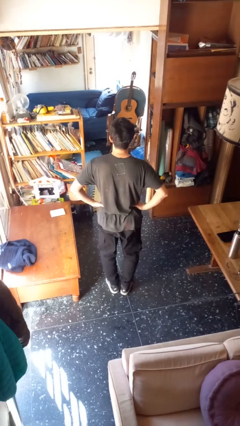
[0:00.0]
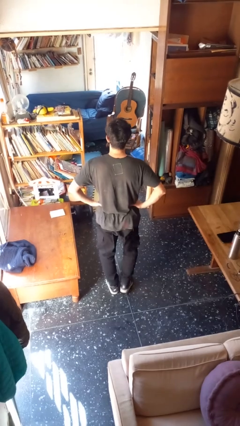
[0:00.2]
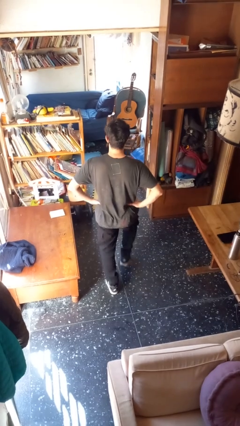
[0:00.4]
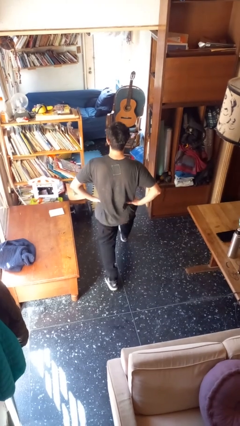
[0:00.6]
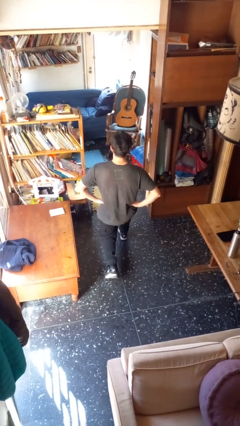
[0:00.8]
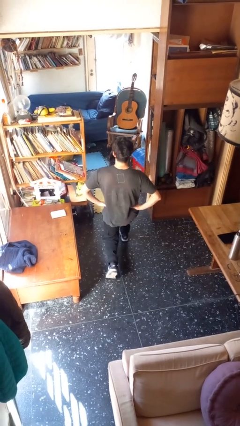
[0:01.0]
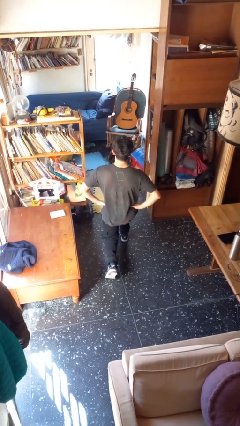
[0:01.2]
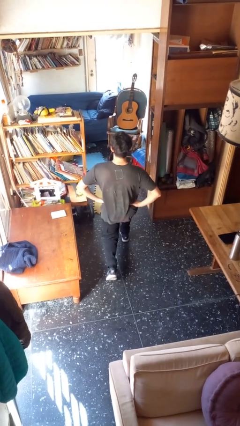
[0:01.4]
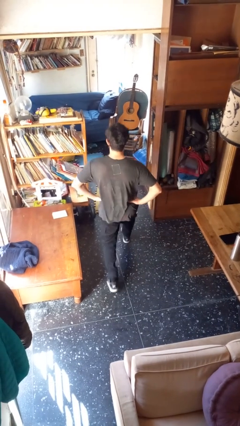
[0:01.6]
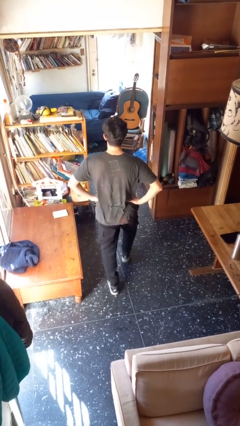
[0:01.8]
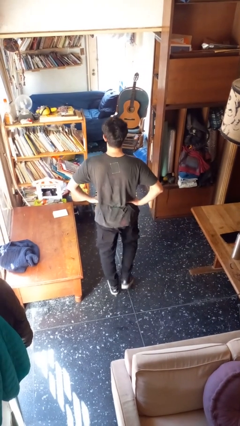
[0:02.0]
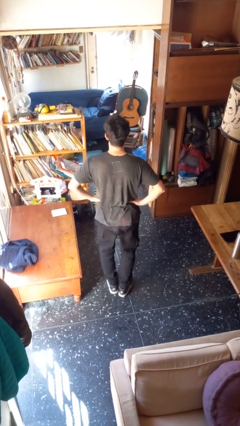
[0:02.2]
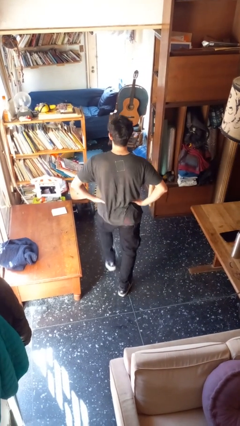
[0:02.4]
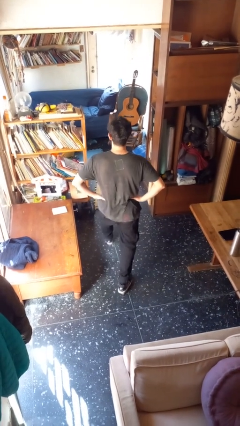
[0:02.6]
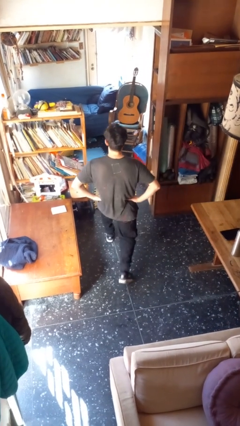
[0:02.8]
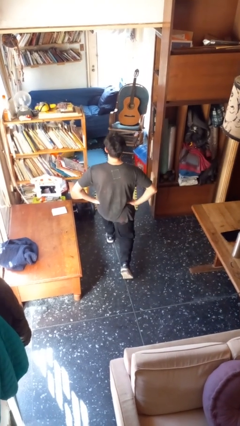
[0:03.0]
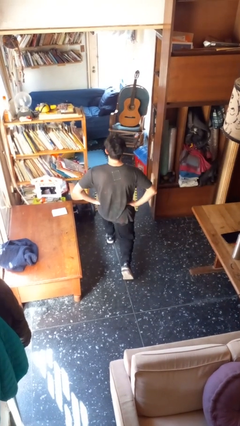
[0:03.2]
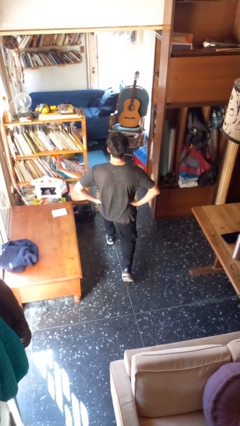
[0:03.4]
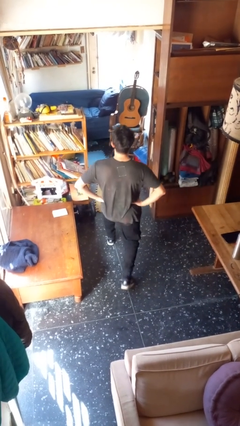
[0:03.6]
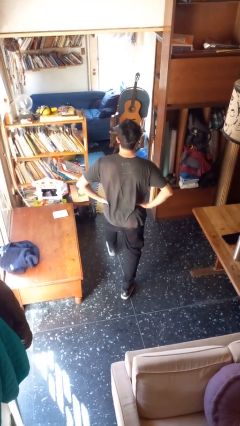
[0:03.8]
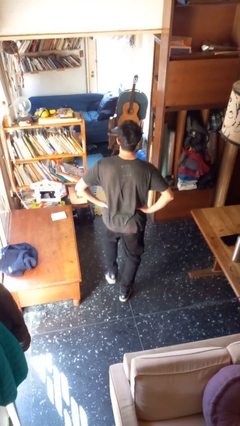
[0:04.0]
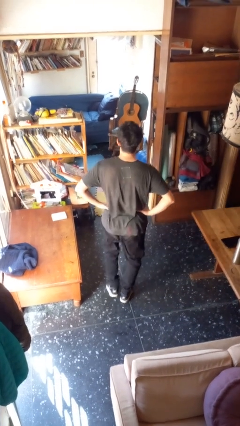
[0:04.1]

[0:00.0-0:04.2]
person exercises with lunges

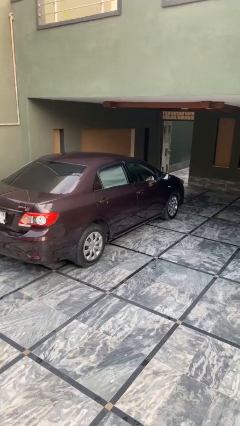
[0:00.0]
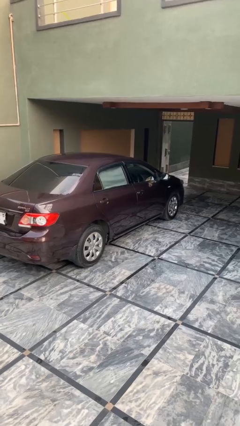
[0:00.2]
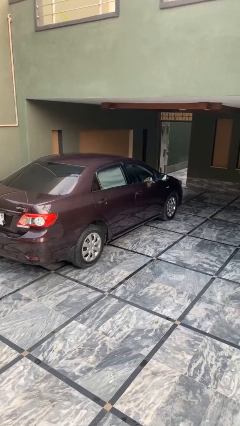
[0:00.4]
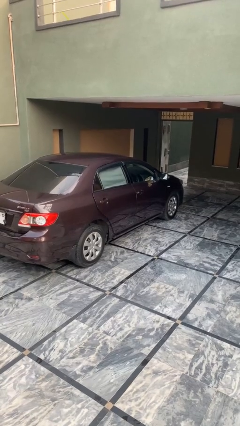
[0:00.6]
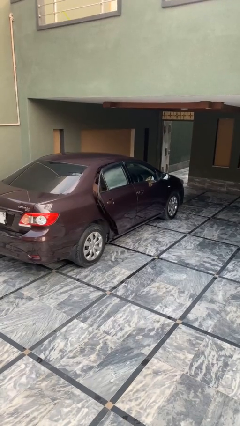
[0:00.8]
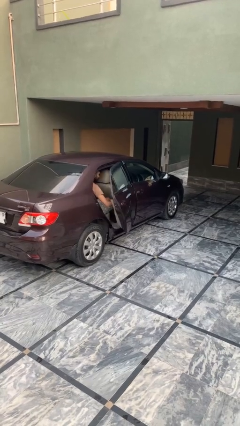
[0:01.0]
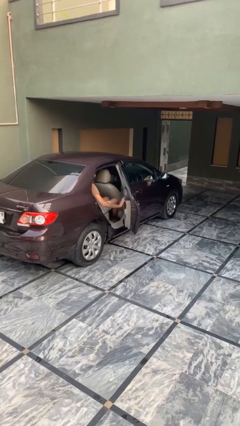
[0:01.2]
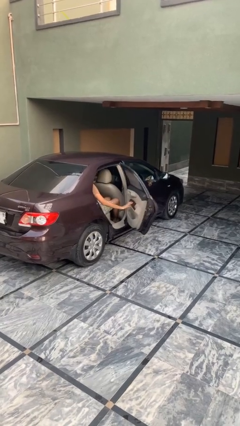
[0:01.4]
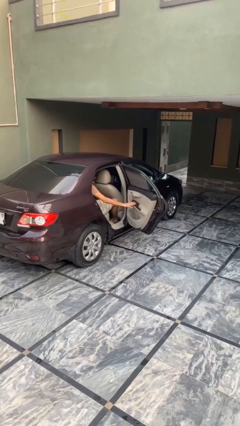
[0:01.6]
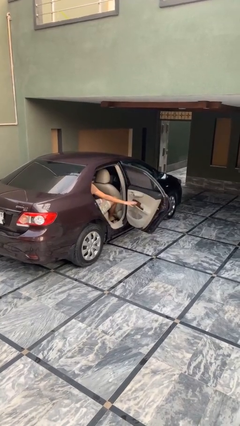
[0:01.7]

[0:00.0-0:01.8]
person opens car door

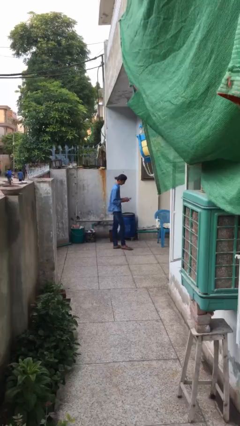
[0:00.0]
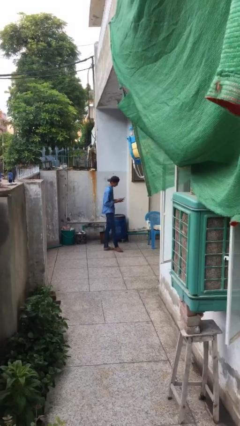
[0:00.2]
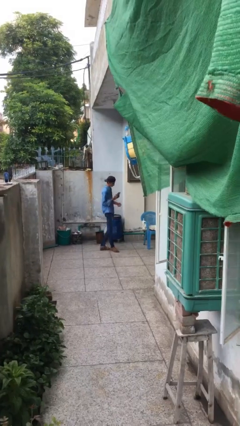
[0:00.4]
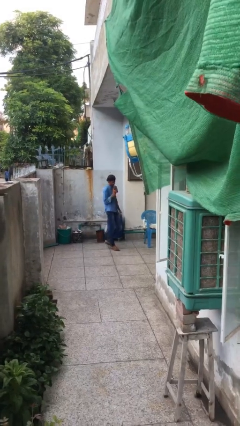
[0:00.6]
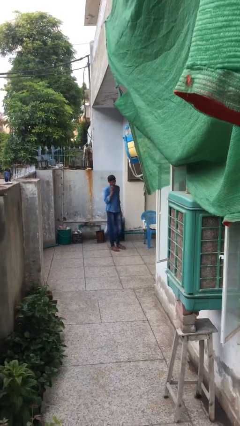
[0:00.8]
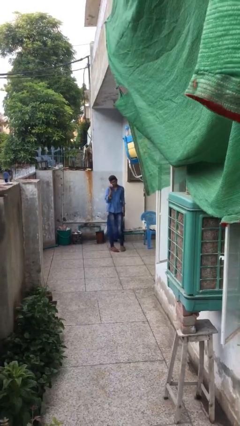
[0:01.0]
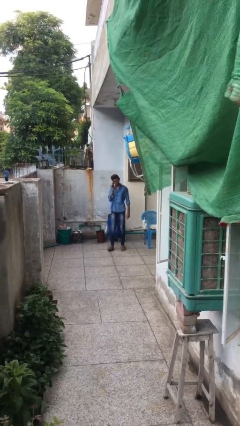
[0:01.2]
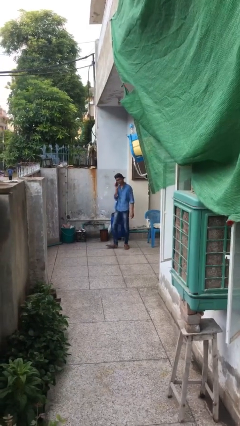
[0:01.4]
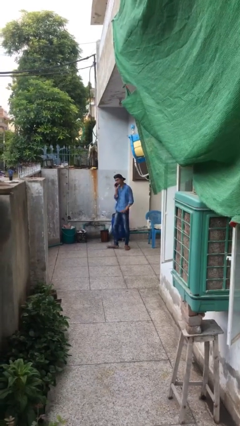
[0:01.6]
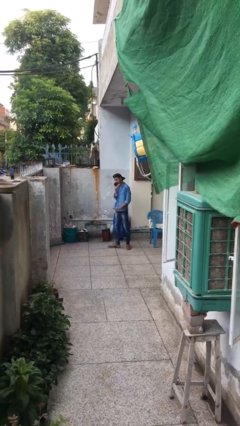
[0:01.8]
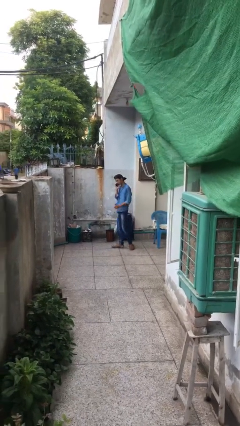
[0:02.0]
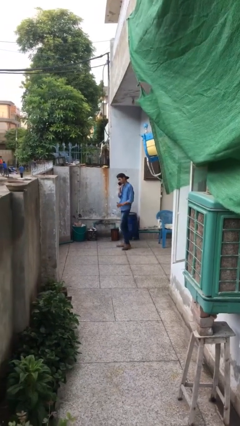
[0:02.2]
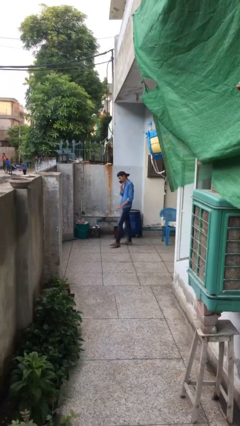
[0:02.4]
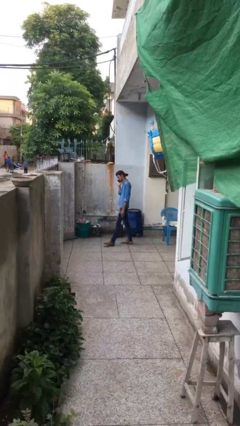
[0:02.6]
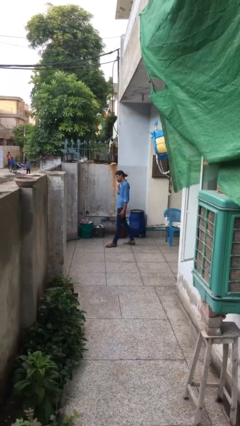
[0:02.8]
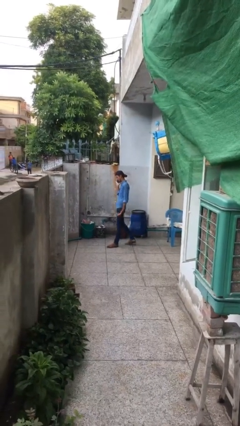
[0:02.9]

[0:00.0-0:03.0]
person talks on phone

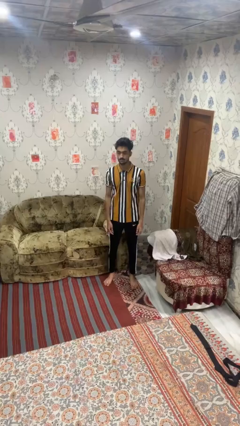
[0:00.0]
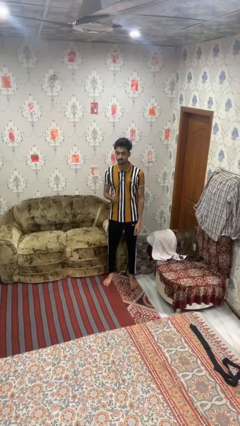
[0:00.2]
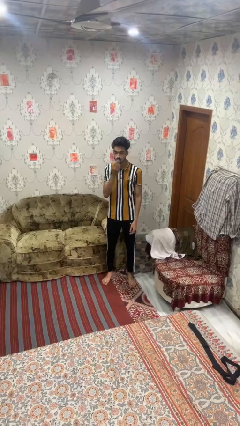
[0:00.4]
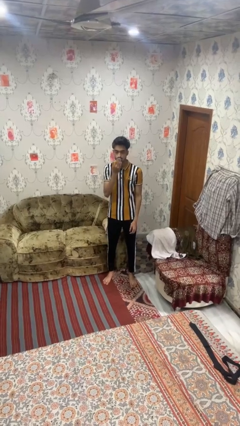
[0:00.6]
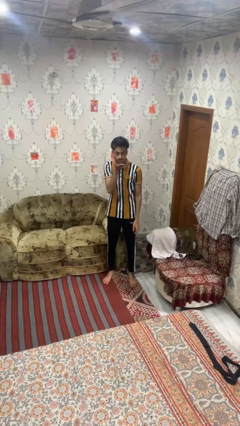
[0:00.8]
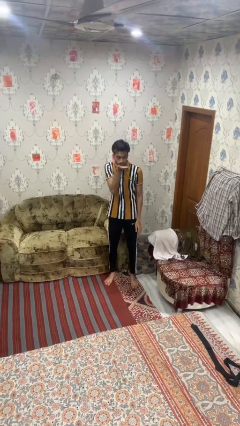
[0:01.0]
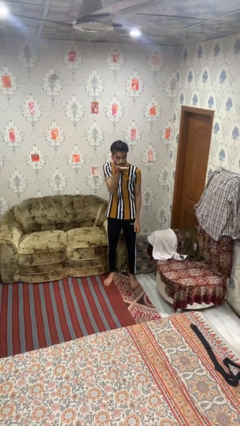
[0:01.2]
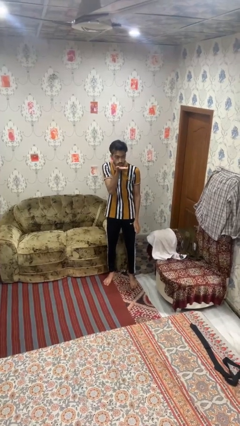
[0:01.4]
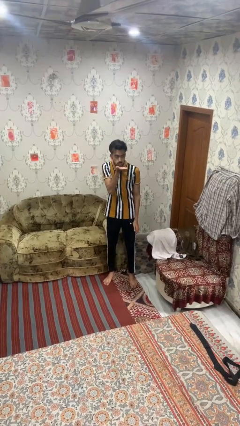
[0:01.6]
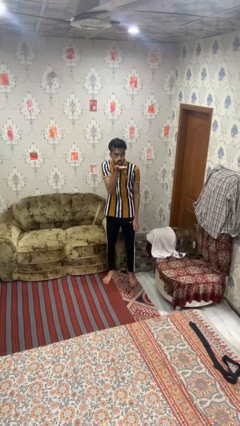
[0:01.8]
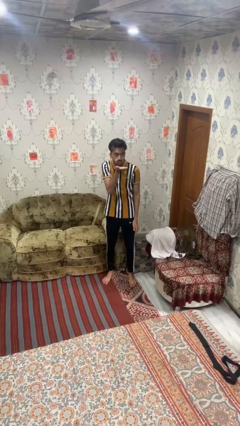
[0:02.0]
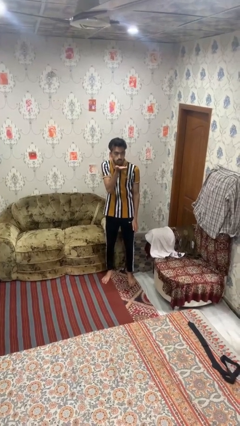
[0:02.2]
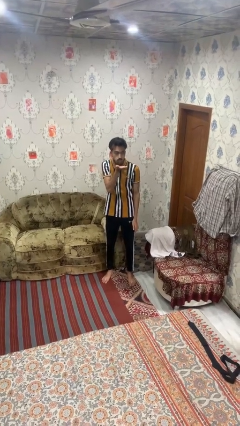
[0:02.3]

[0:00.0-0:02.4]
person gestures blow kiss

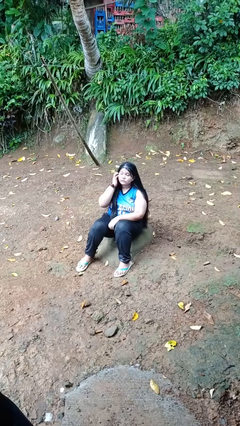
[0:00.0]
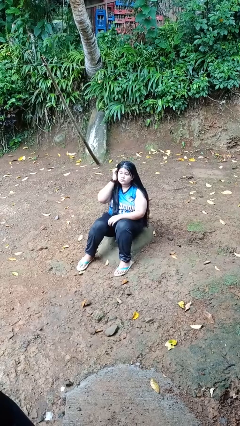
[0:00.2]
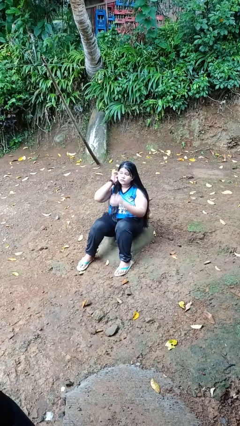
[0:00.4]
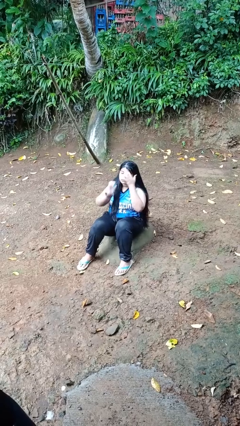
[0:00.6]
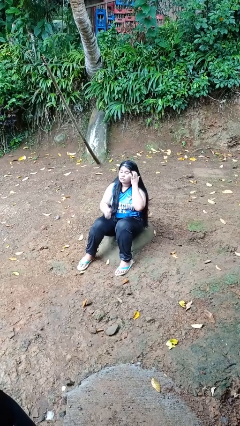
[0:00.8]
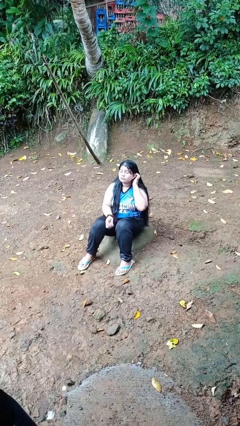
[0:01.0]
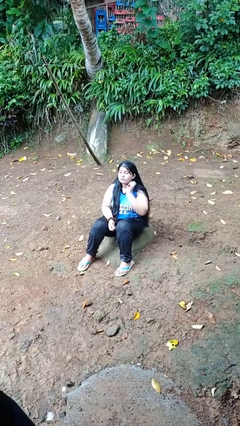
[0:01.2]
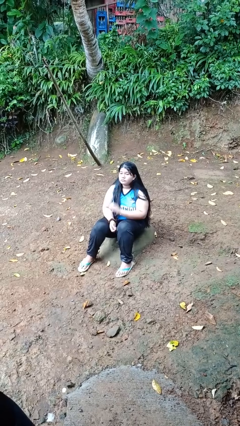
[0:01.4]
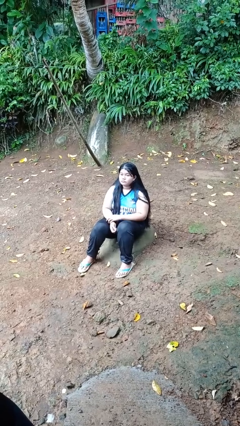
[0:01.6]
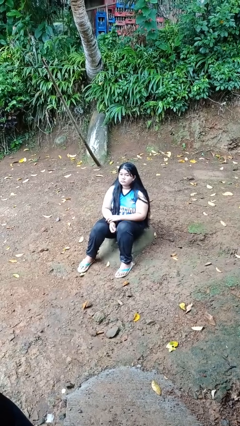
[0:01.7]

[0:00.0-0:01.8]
person strokes hair

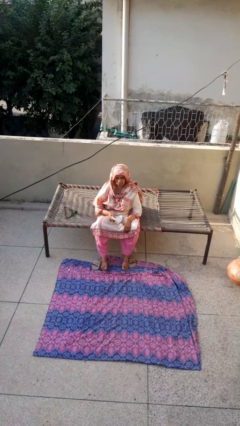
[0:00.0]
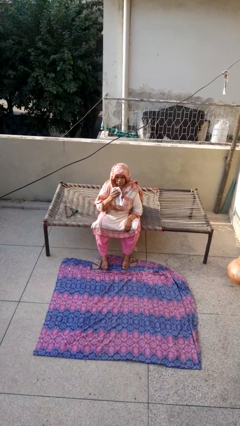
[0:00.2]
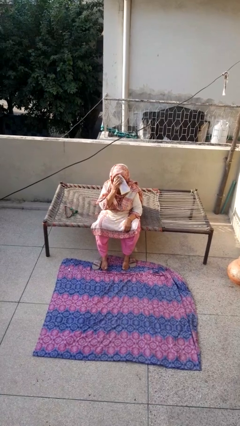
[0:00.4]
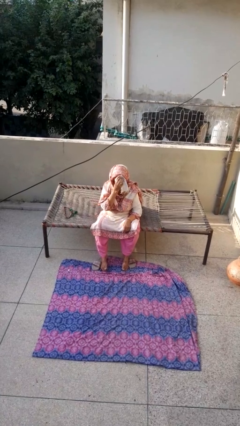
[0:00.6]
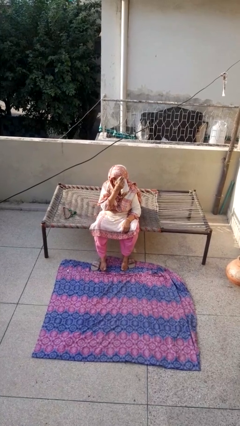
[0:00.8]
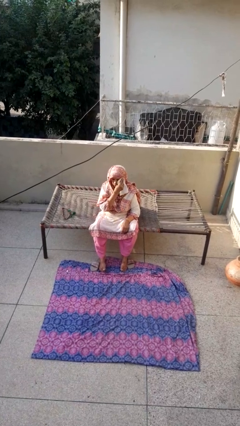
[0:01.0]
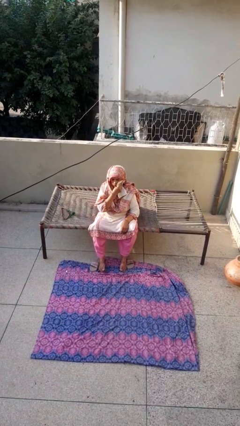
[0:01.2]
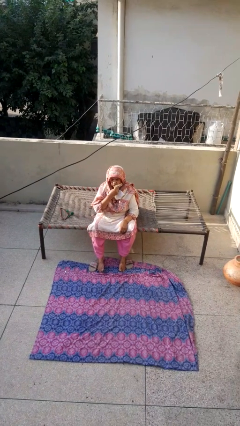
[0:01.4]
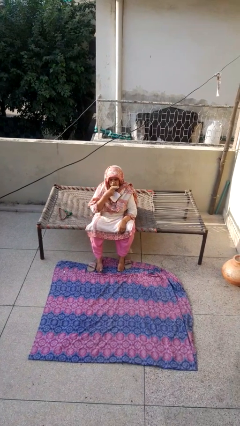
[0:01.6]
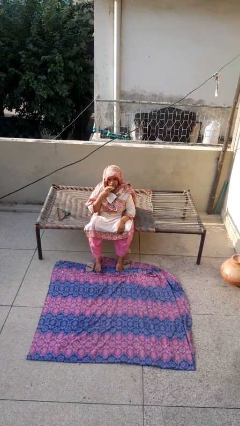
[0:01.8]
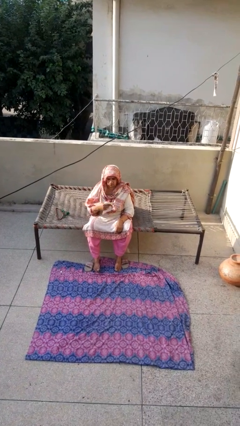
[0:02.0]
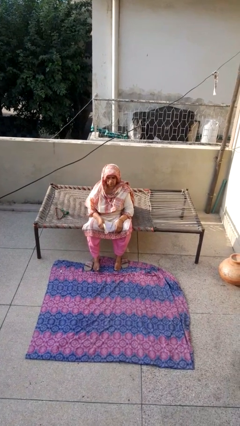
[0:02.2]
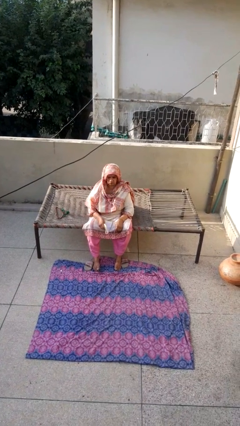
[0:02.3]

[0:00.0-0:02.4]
person wipes mouth with napkin

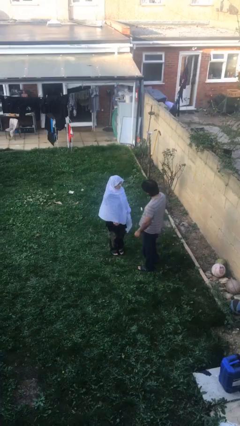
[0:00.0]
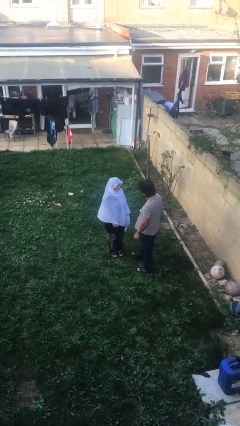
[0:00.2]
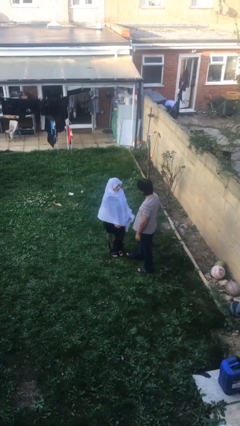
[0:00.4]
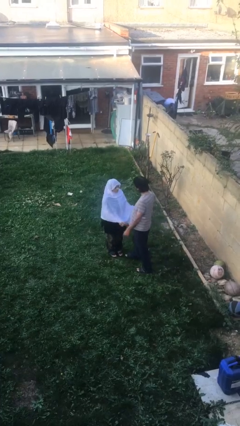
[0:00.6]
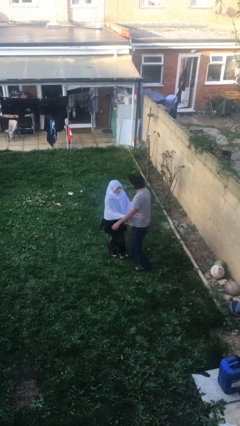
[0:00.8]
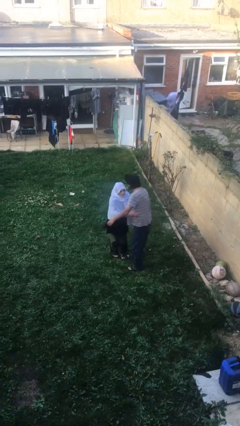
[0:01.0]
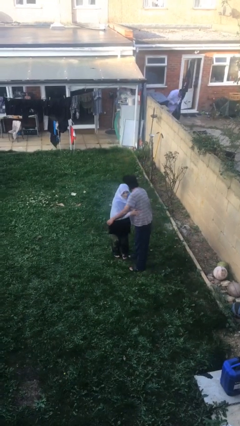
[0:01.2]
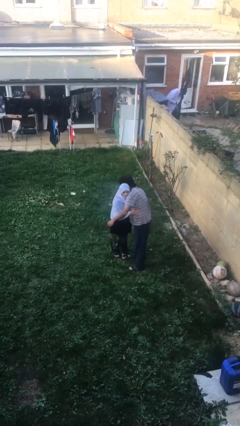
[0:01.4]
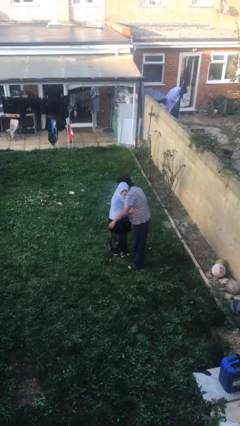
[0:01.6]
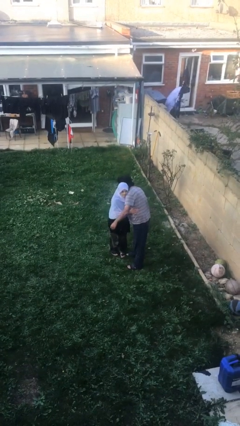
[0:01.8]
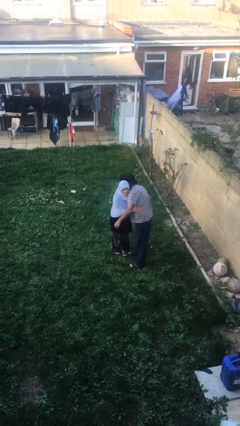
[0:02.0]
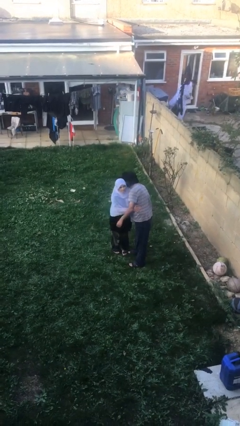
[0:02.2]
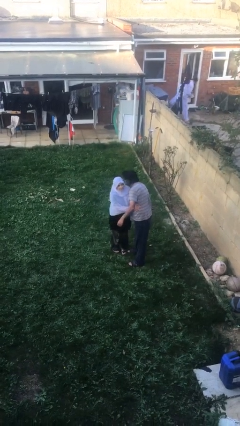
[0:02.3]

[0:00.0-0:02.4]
person embraces person
